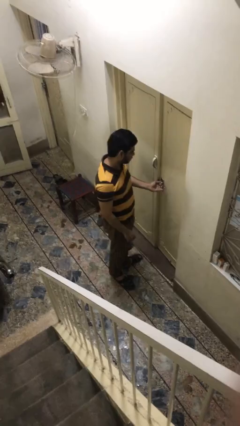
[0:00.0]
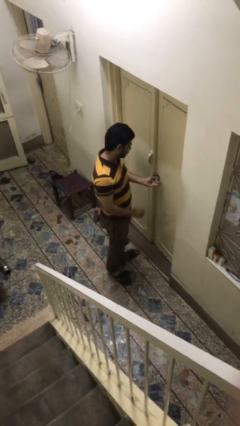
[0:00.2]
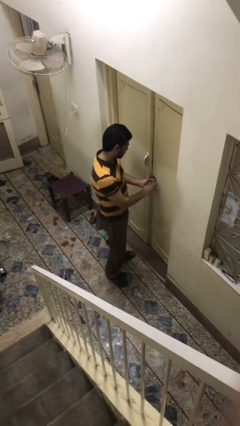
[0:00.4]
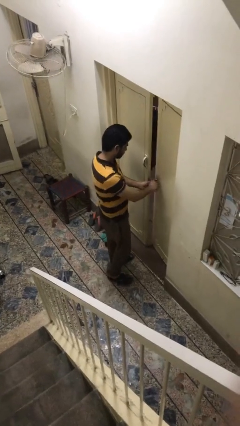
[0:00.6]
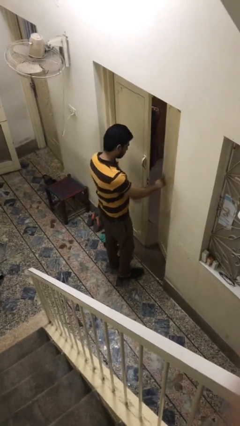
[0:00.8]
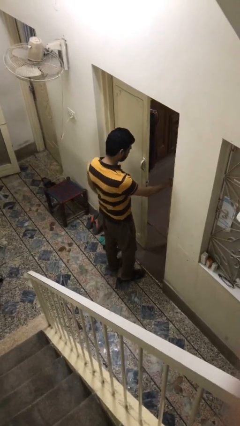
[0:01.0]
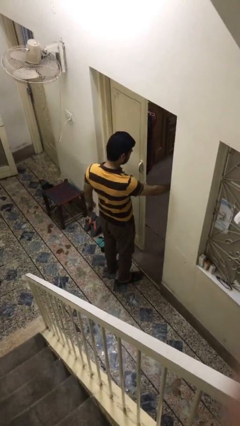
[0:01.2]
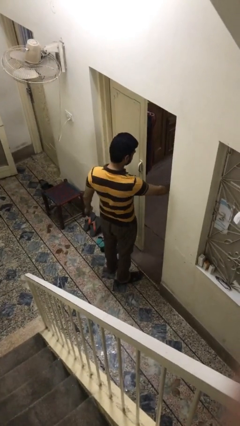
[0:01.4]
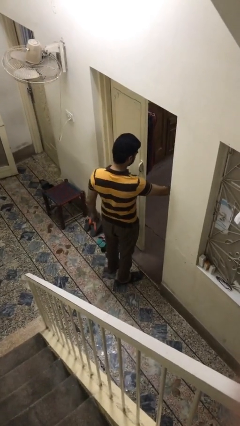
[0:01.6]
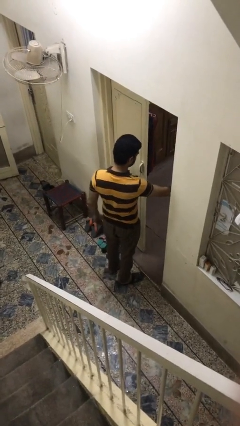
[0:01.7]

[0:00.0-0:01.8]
person opens facility door

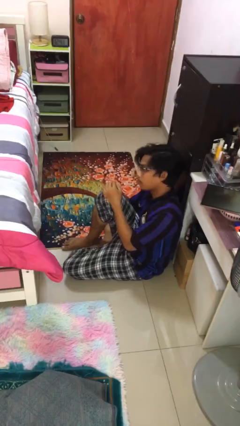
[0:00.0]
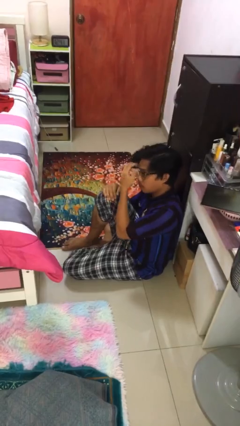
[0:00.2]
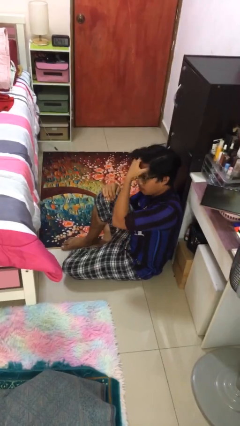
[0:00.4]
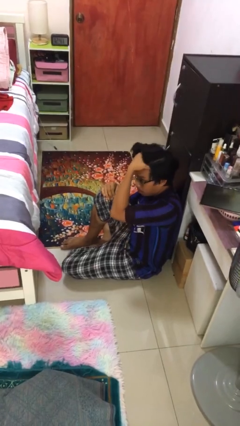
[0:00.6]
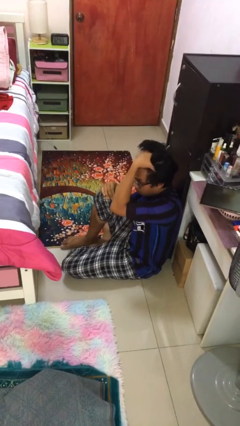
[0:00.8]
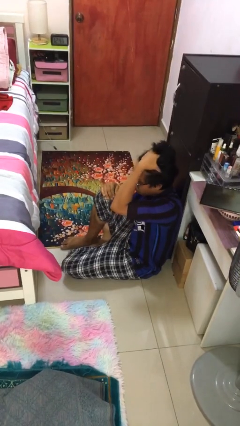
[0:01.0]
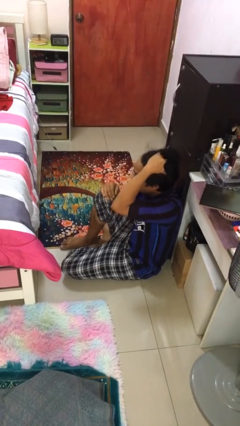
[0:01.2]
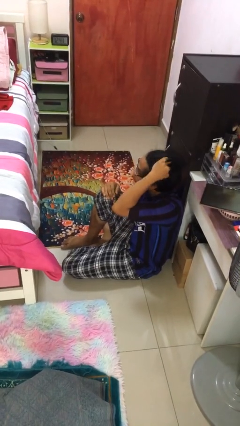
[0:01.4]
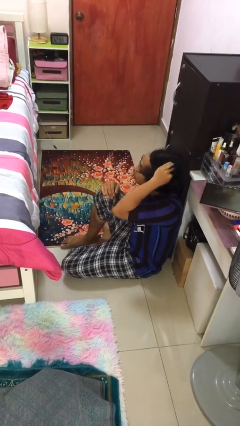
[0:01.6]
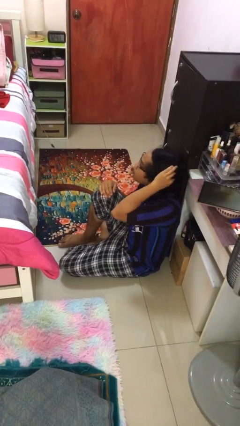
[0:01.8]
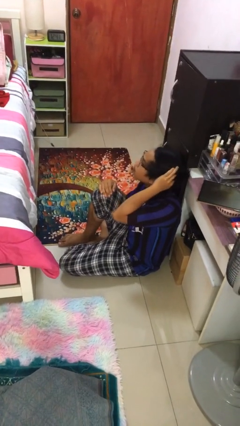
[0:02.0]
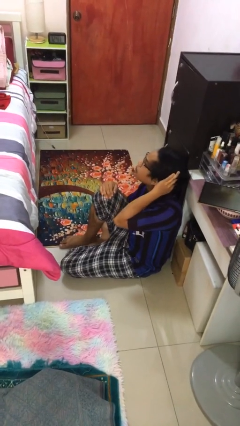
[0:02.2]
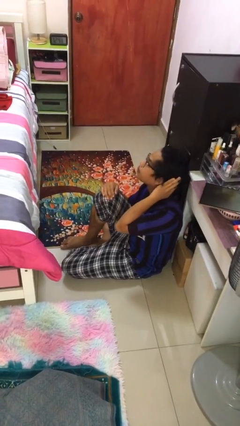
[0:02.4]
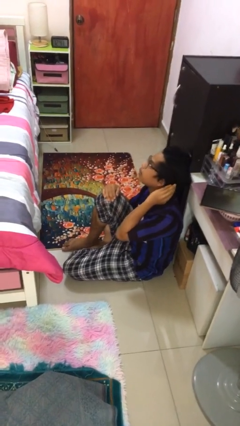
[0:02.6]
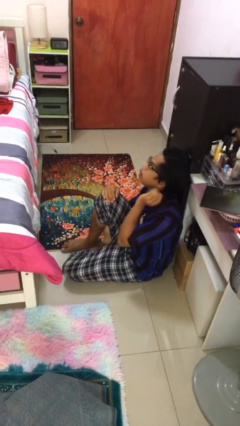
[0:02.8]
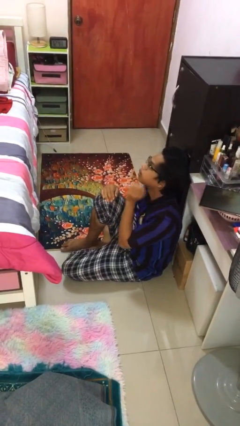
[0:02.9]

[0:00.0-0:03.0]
person strokes hair

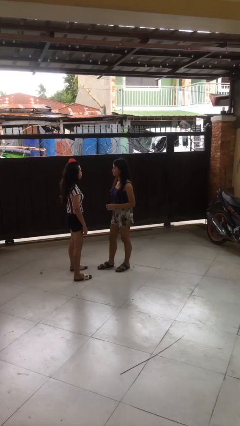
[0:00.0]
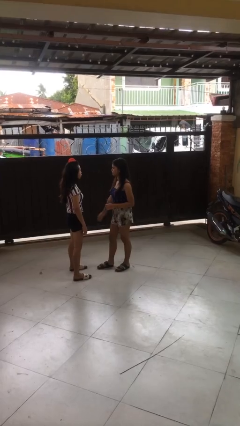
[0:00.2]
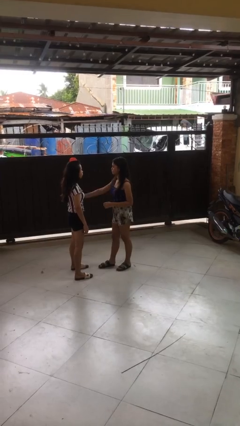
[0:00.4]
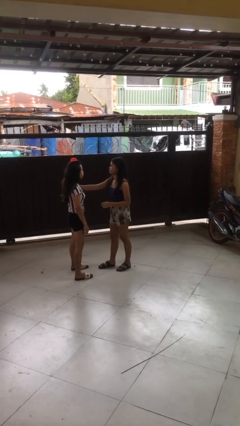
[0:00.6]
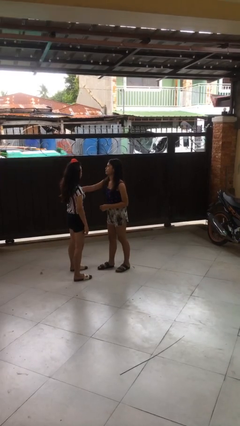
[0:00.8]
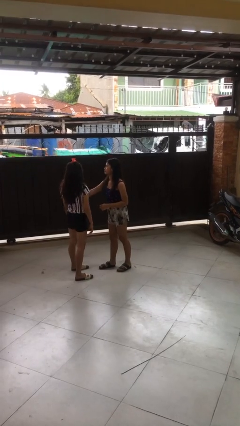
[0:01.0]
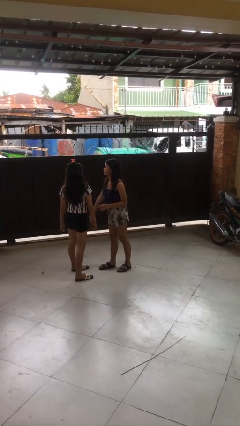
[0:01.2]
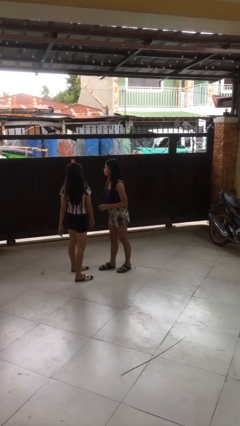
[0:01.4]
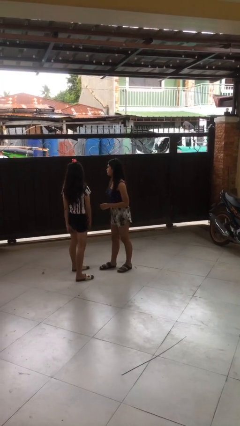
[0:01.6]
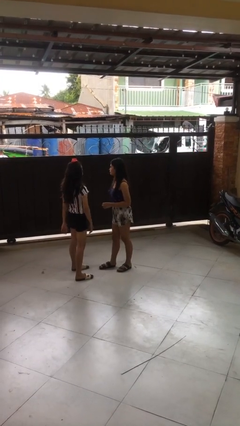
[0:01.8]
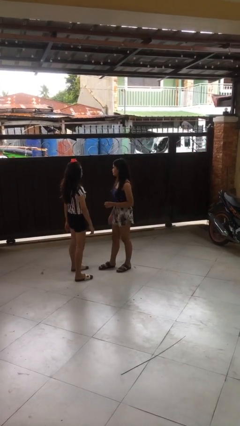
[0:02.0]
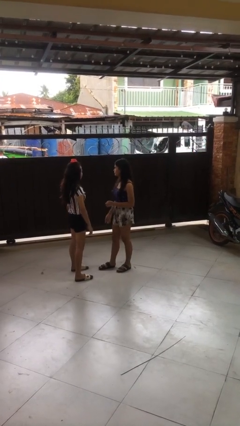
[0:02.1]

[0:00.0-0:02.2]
person shoves person

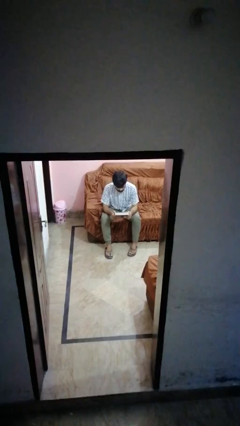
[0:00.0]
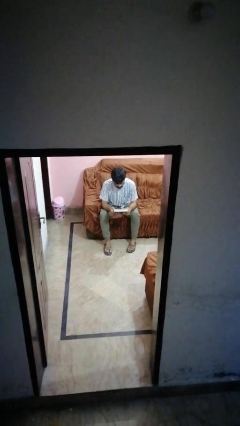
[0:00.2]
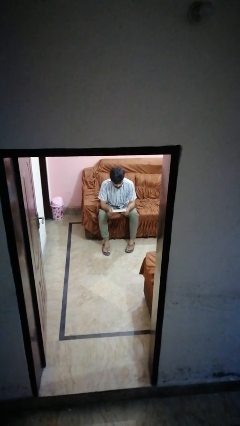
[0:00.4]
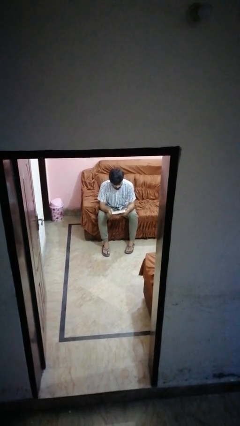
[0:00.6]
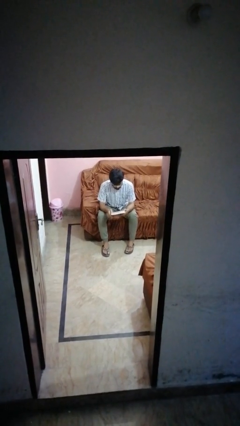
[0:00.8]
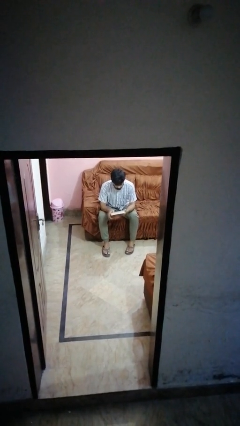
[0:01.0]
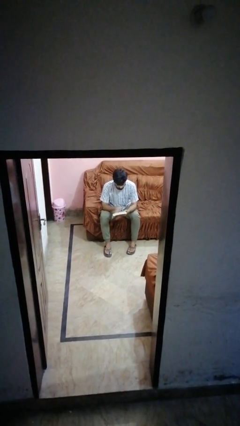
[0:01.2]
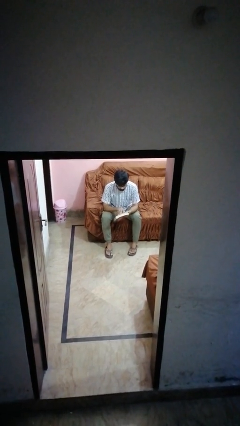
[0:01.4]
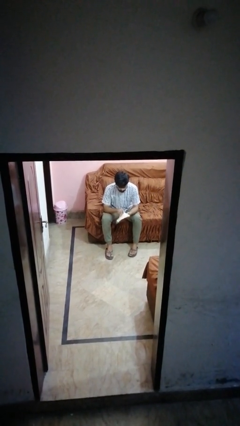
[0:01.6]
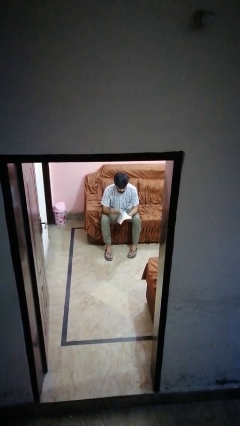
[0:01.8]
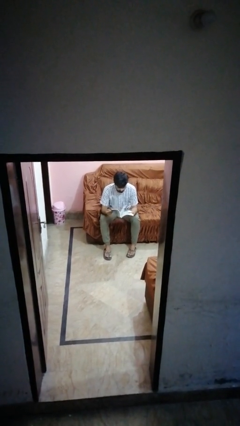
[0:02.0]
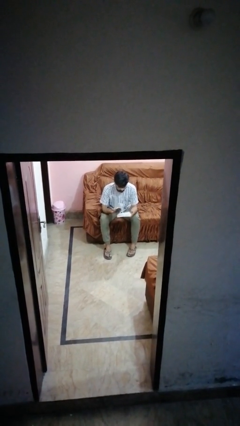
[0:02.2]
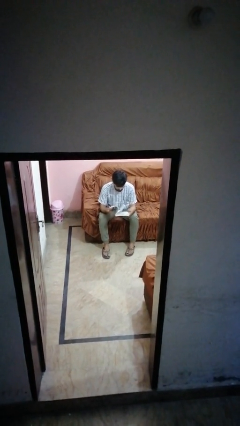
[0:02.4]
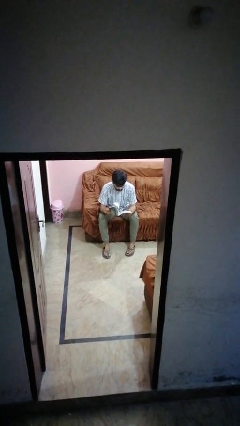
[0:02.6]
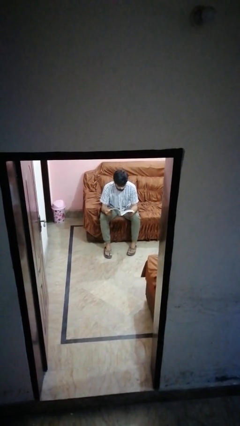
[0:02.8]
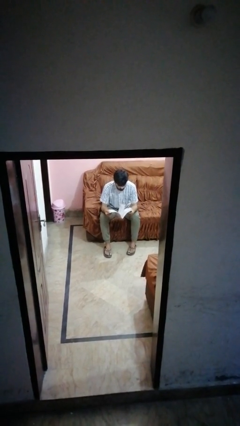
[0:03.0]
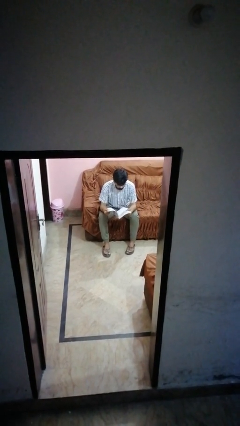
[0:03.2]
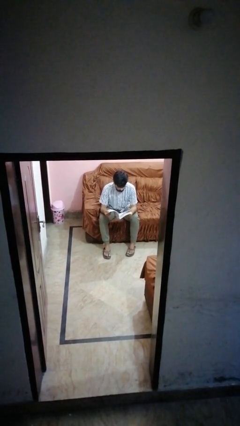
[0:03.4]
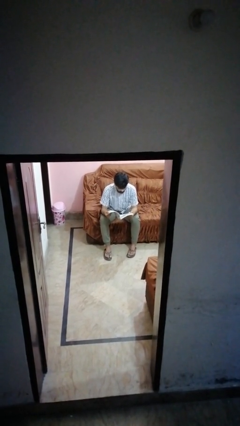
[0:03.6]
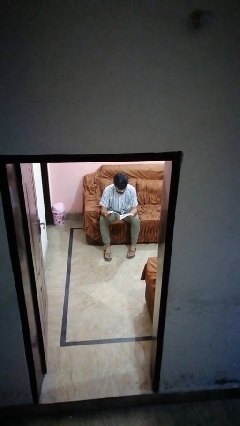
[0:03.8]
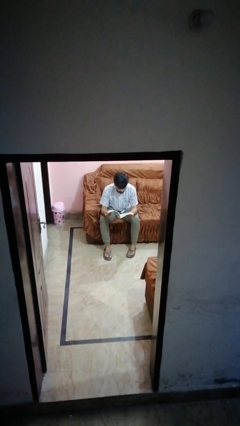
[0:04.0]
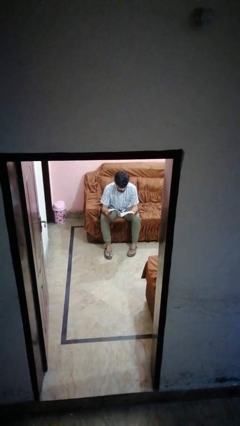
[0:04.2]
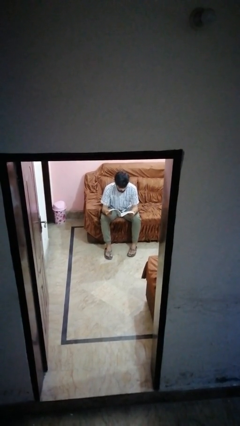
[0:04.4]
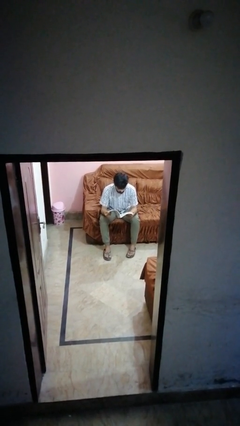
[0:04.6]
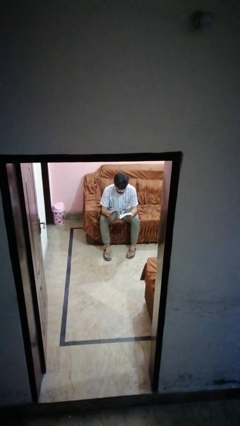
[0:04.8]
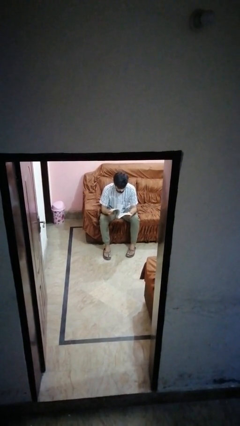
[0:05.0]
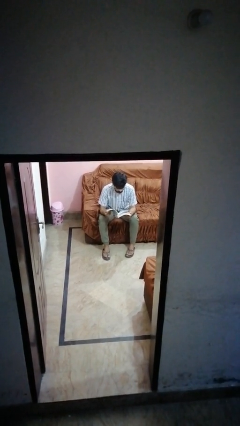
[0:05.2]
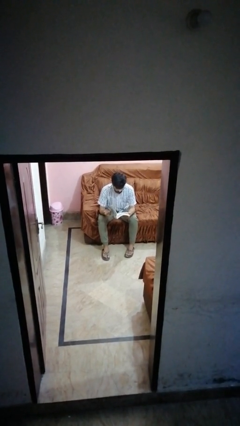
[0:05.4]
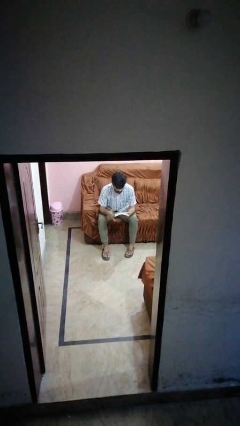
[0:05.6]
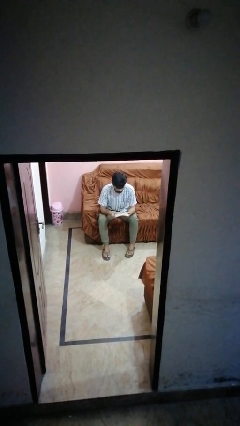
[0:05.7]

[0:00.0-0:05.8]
person reads book

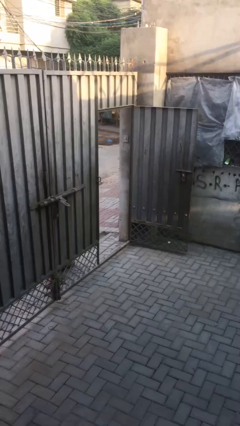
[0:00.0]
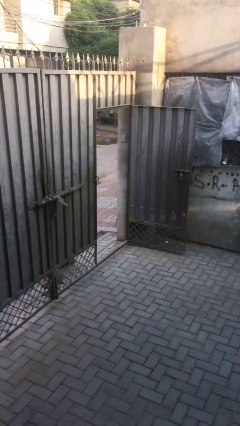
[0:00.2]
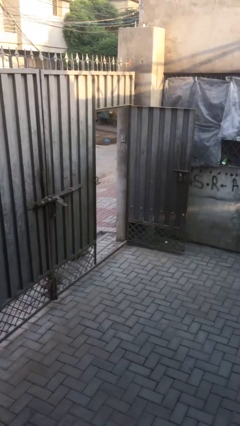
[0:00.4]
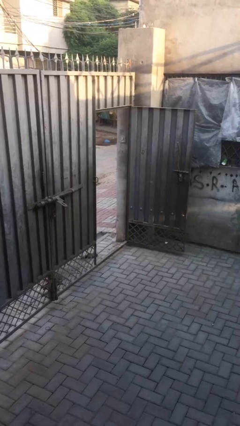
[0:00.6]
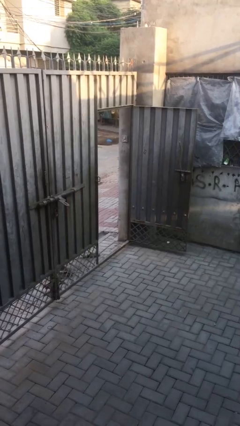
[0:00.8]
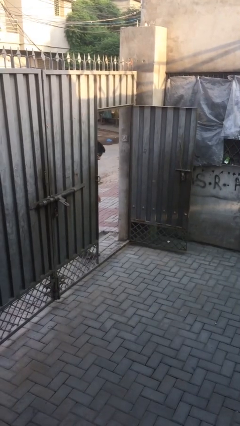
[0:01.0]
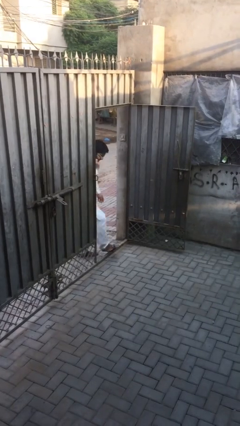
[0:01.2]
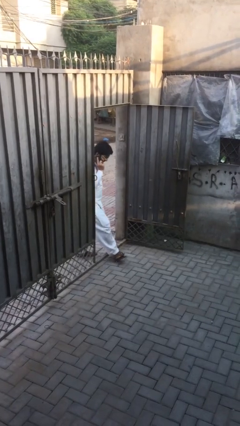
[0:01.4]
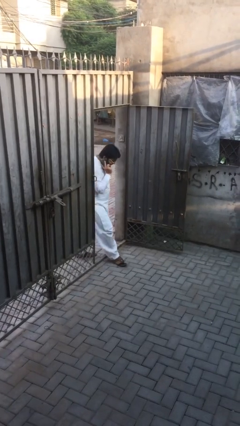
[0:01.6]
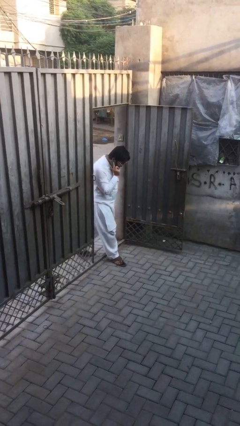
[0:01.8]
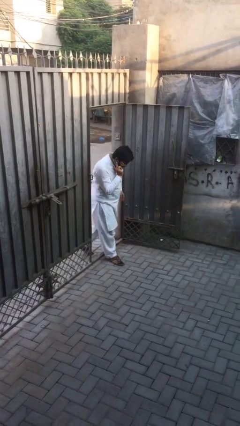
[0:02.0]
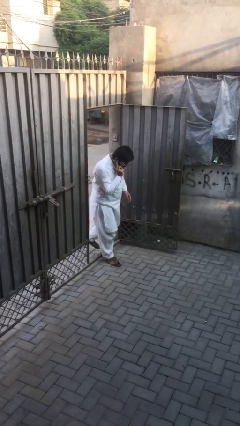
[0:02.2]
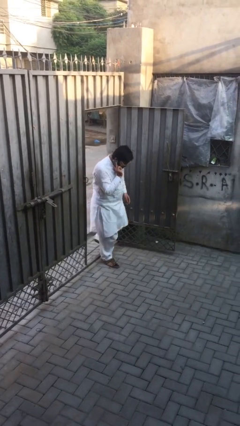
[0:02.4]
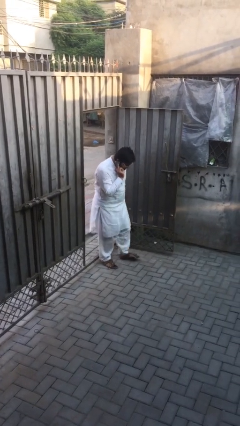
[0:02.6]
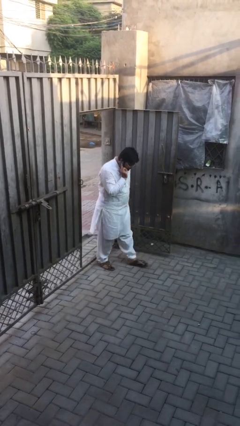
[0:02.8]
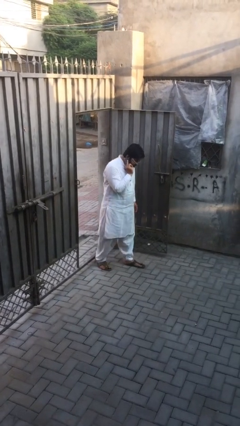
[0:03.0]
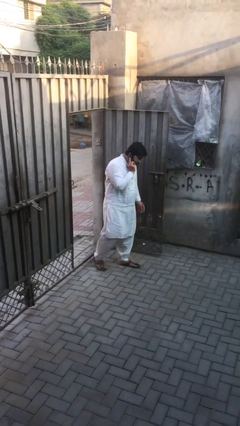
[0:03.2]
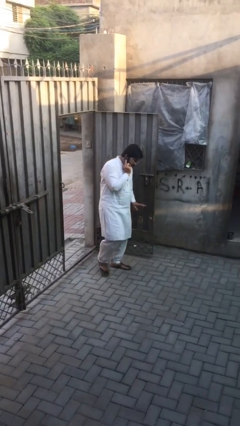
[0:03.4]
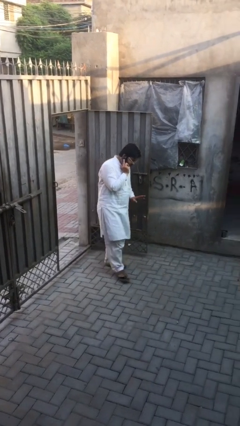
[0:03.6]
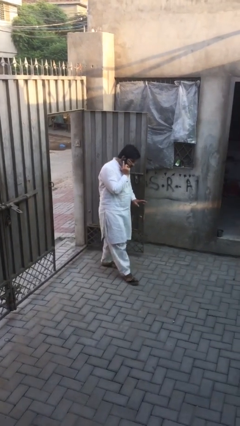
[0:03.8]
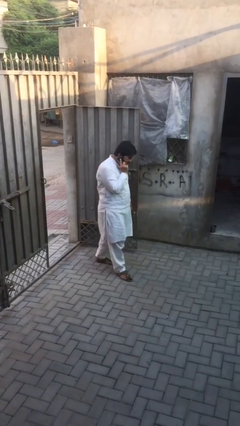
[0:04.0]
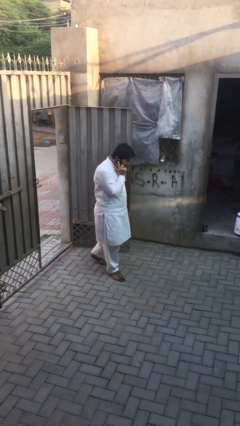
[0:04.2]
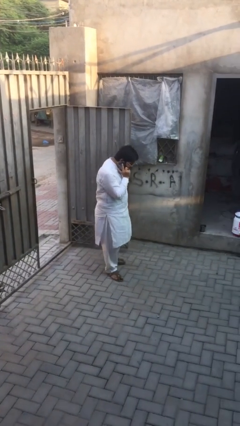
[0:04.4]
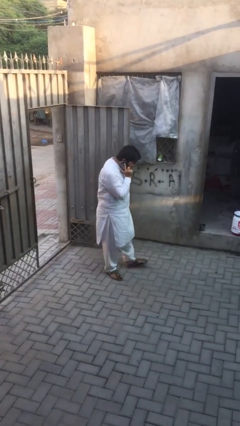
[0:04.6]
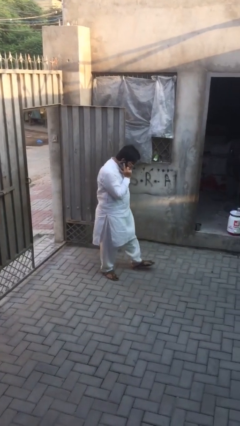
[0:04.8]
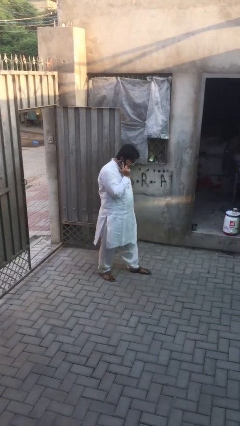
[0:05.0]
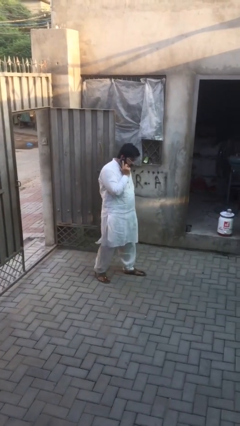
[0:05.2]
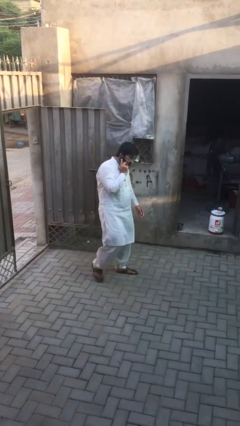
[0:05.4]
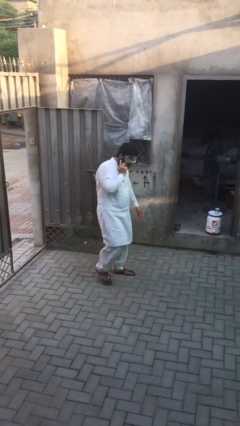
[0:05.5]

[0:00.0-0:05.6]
person enters scene through structure
